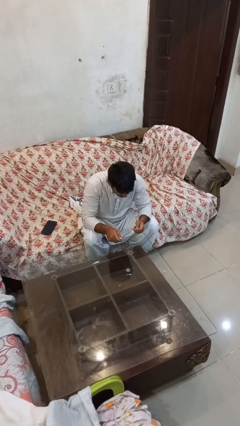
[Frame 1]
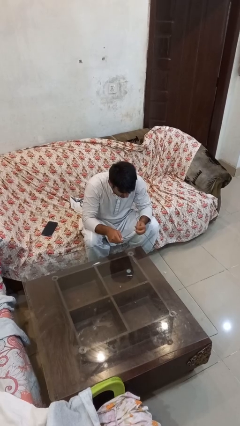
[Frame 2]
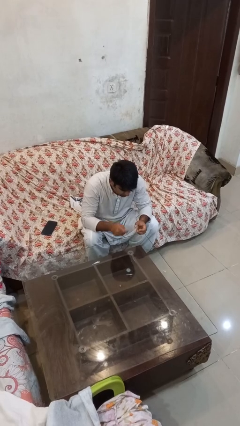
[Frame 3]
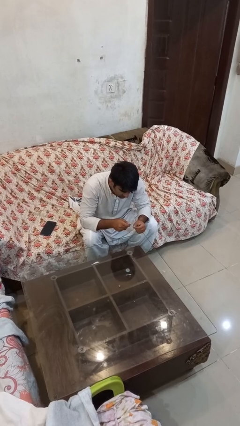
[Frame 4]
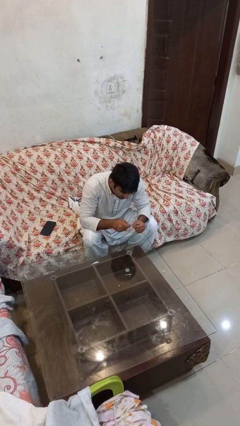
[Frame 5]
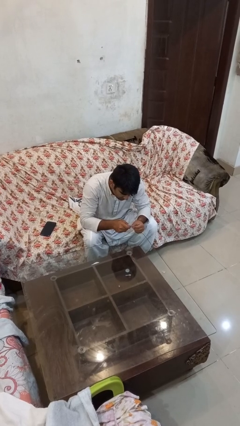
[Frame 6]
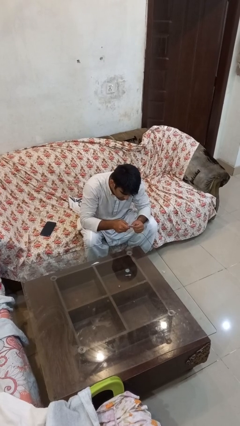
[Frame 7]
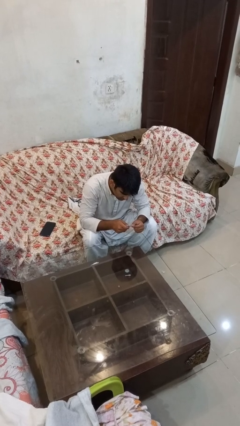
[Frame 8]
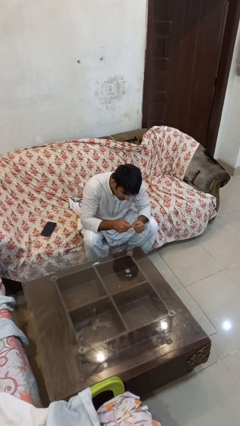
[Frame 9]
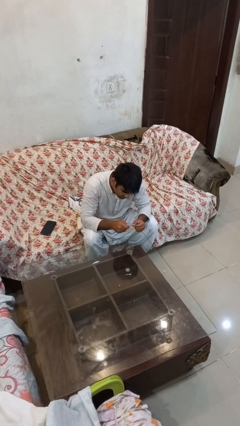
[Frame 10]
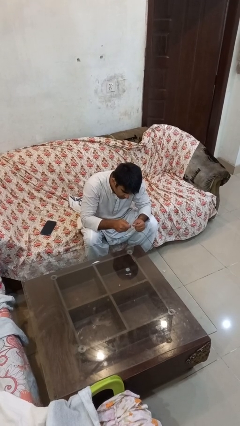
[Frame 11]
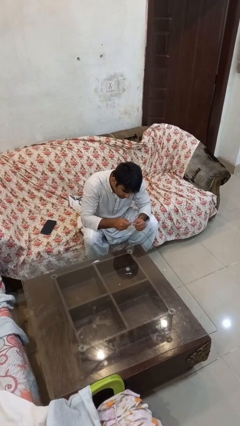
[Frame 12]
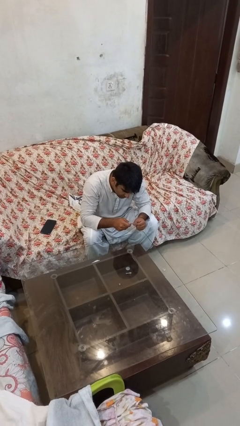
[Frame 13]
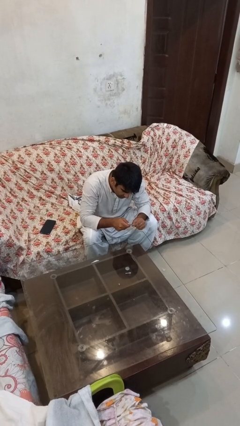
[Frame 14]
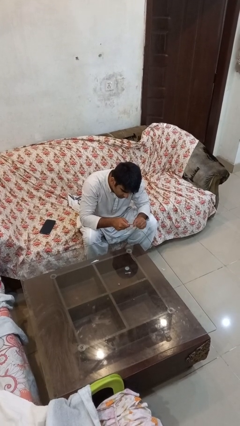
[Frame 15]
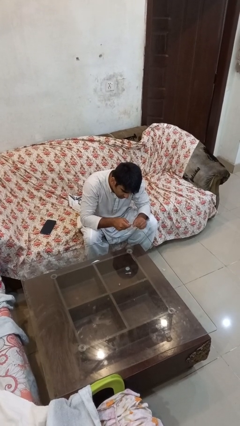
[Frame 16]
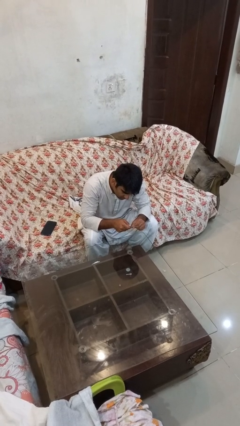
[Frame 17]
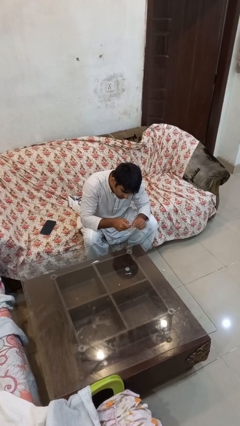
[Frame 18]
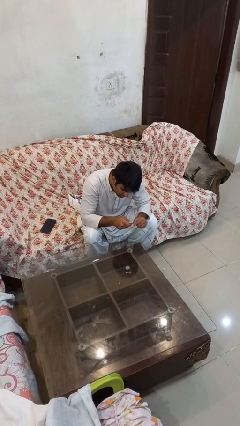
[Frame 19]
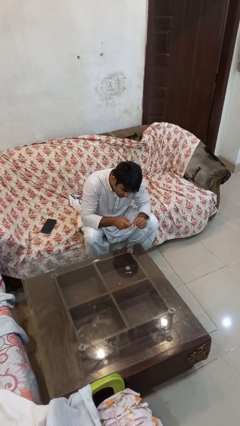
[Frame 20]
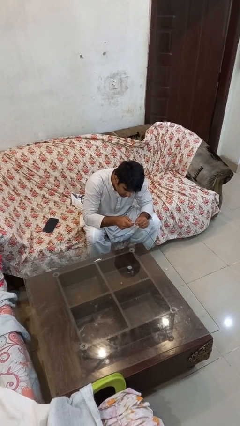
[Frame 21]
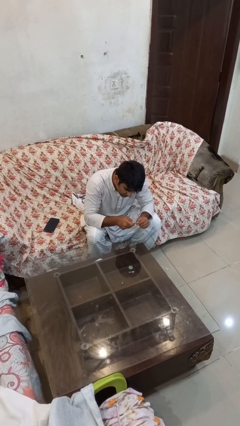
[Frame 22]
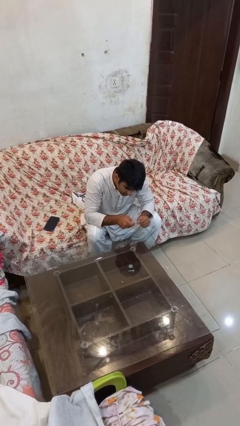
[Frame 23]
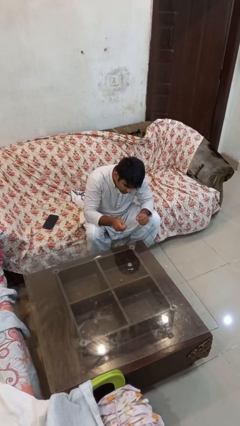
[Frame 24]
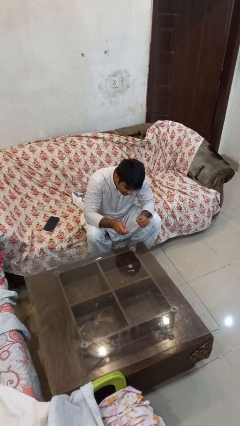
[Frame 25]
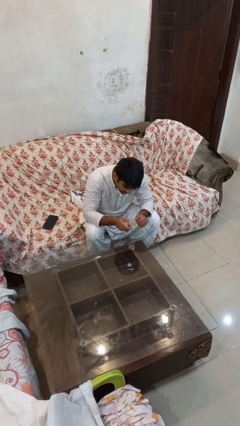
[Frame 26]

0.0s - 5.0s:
person files fingernails

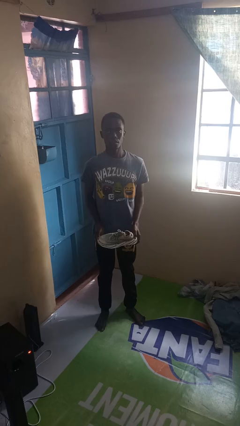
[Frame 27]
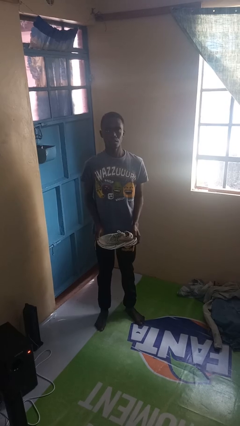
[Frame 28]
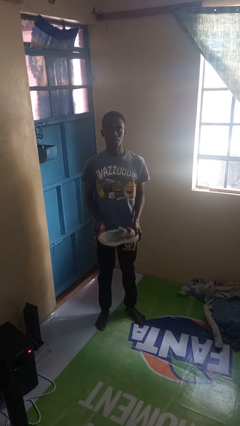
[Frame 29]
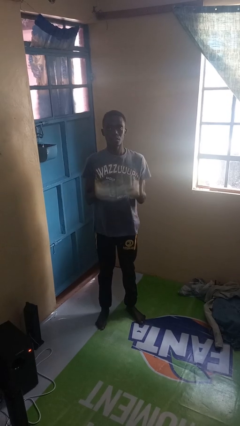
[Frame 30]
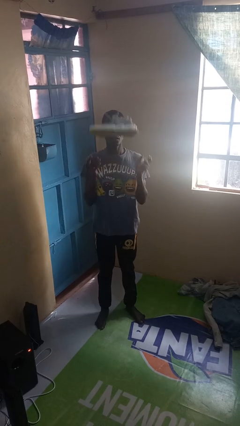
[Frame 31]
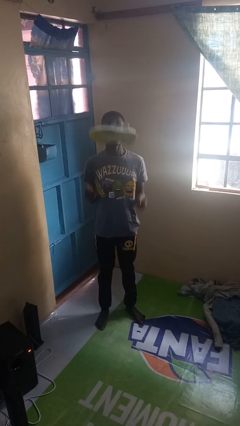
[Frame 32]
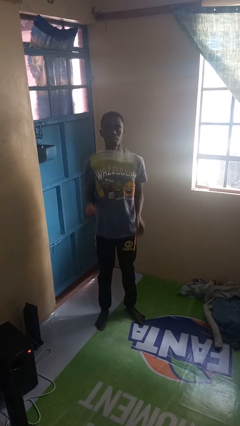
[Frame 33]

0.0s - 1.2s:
person throws object into air

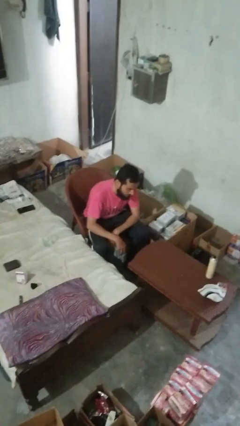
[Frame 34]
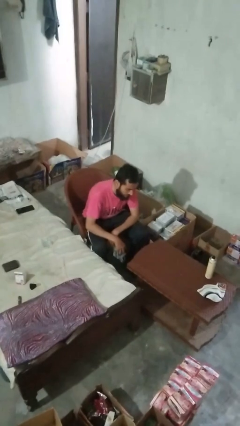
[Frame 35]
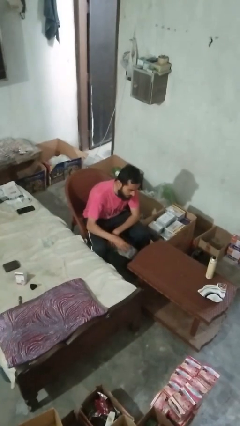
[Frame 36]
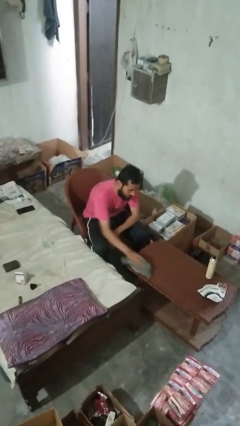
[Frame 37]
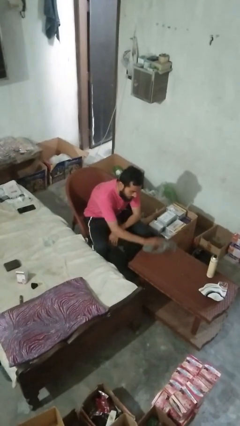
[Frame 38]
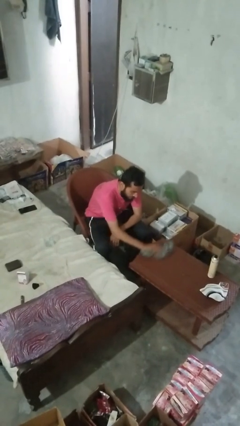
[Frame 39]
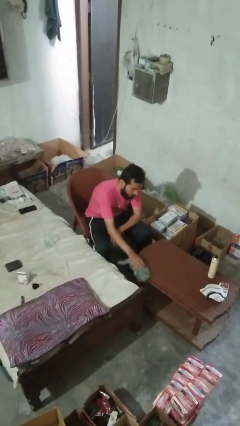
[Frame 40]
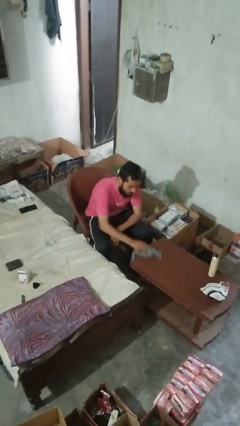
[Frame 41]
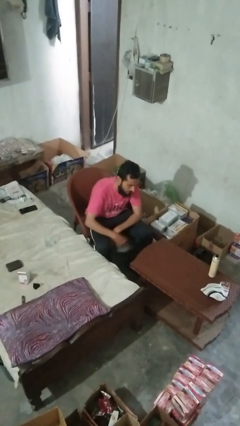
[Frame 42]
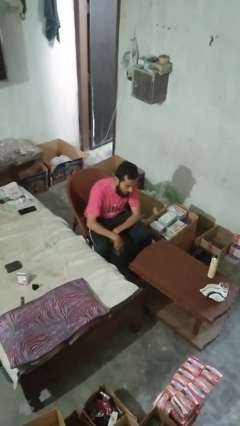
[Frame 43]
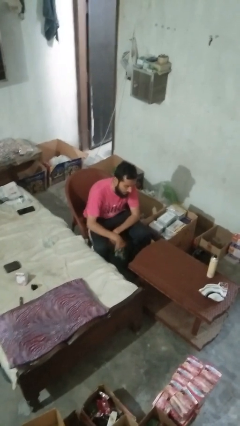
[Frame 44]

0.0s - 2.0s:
person cleans table with rag

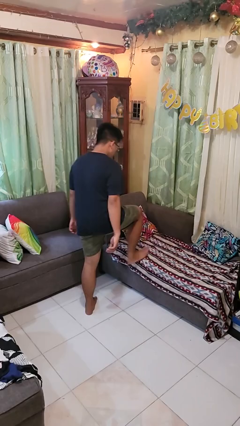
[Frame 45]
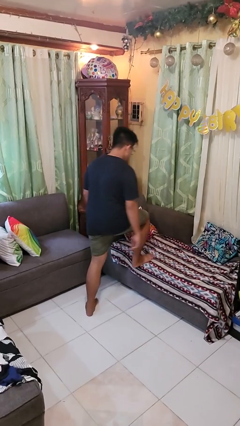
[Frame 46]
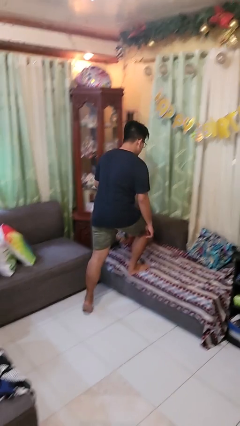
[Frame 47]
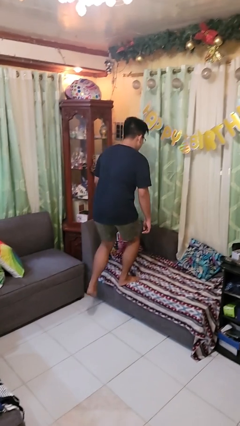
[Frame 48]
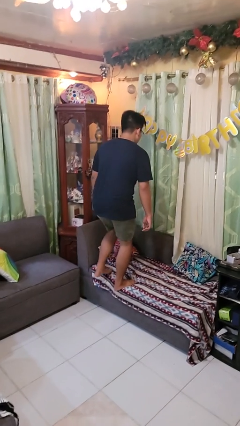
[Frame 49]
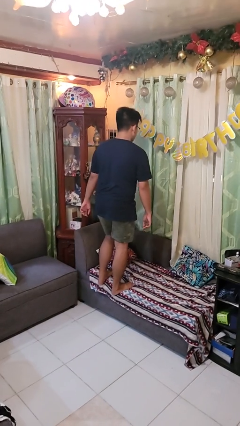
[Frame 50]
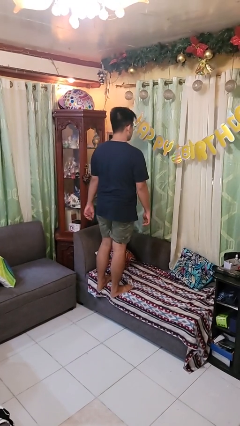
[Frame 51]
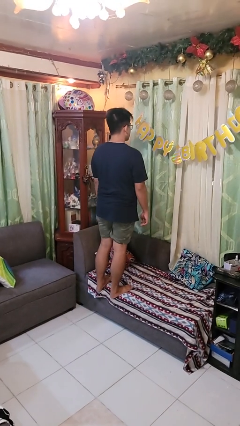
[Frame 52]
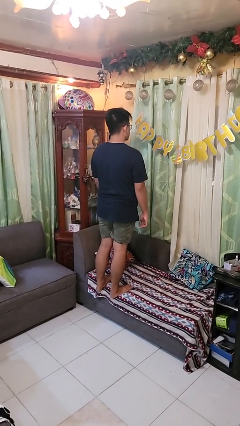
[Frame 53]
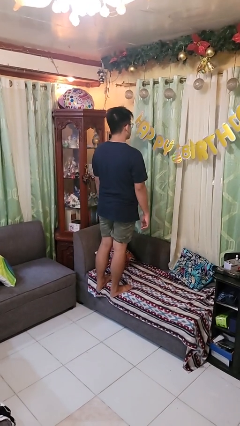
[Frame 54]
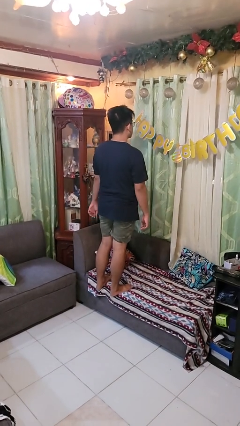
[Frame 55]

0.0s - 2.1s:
person climbs on couch

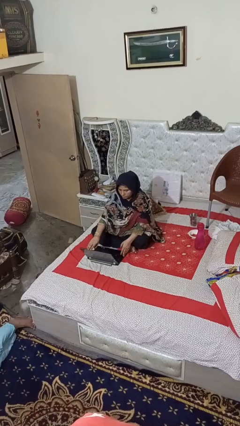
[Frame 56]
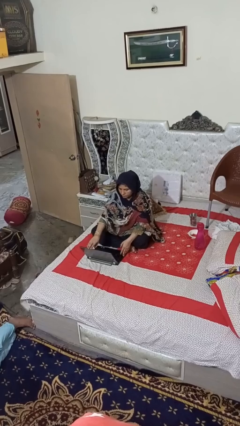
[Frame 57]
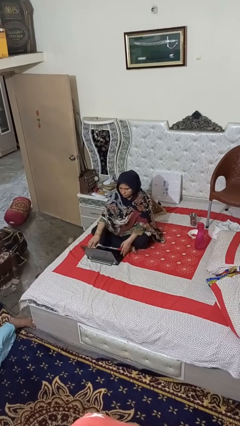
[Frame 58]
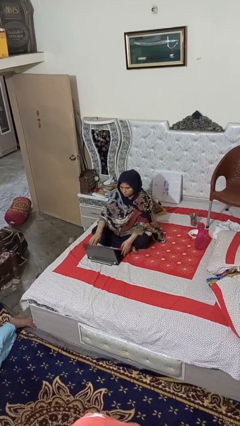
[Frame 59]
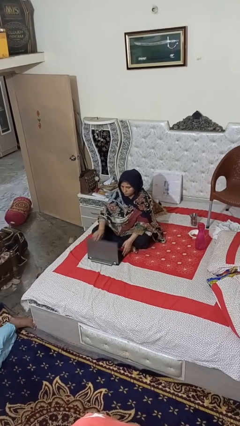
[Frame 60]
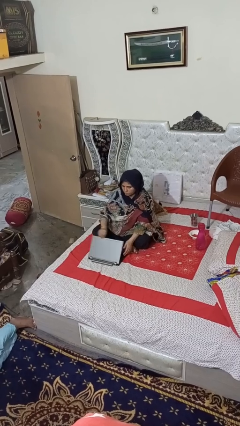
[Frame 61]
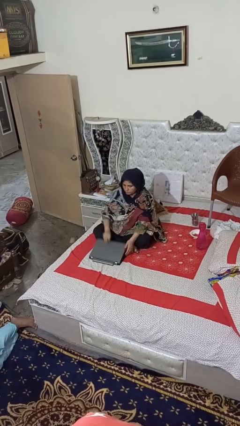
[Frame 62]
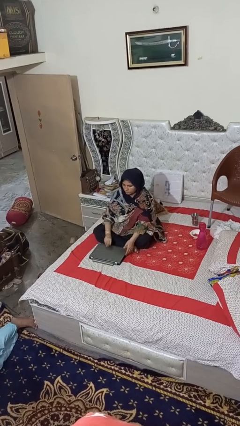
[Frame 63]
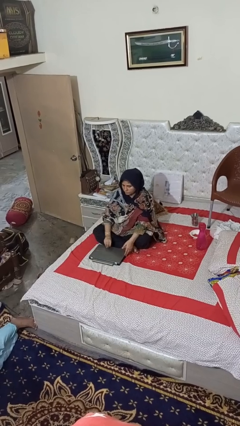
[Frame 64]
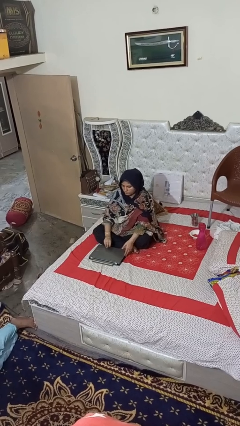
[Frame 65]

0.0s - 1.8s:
person closes laptop

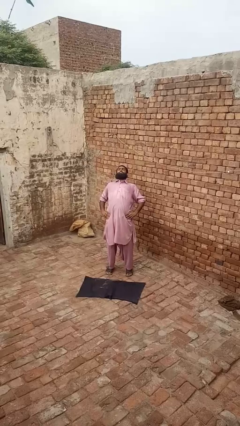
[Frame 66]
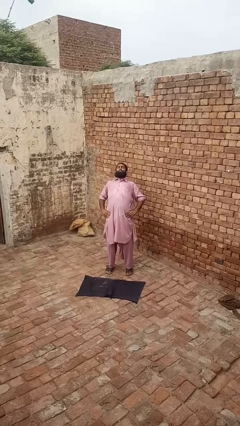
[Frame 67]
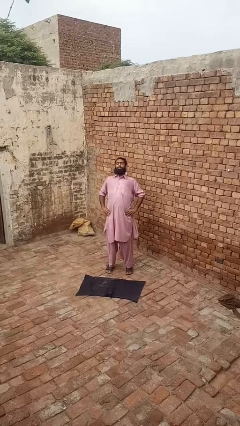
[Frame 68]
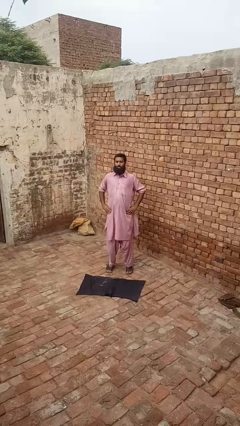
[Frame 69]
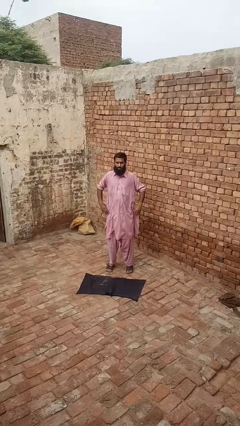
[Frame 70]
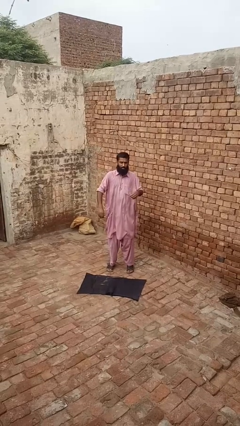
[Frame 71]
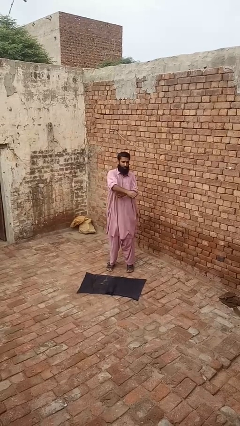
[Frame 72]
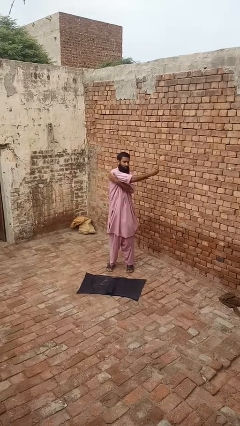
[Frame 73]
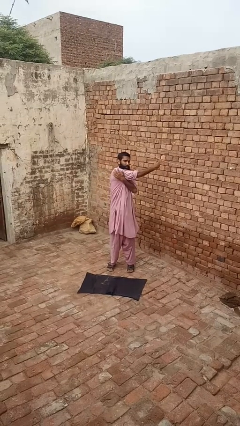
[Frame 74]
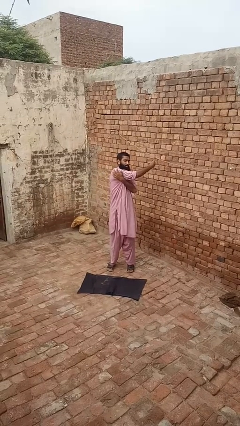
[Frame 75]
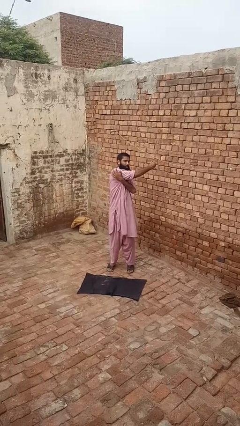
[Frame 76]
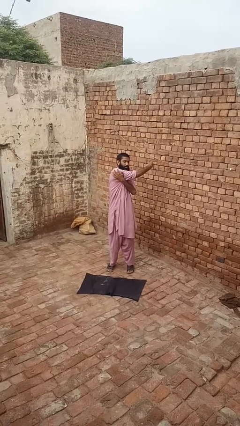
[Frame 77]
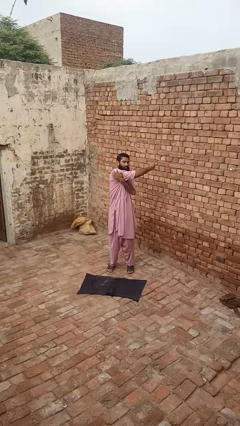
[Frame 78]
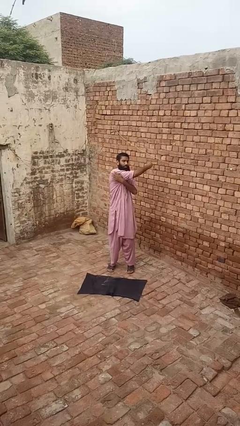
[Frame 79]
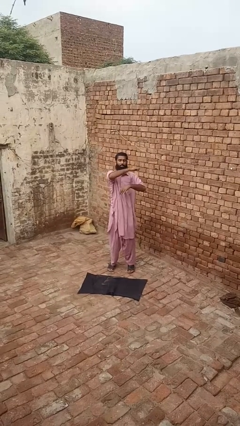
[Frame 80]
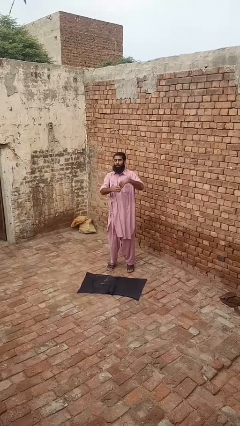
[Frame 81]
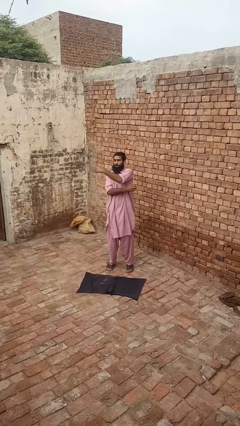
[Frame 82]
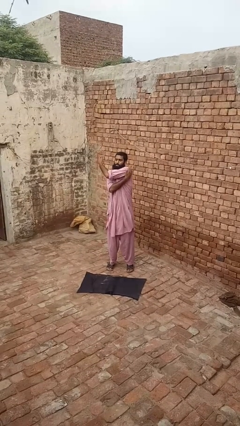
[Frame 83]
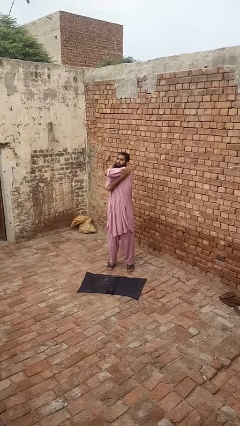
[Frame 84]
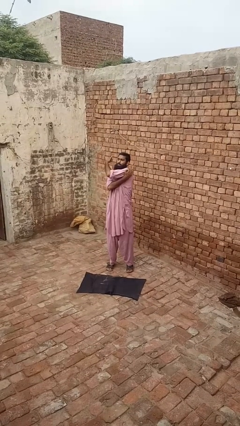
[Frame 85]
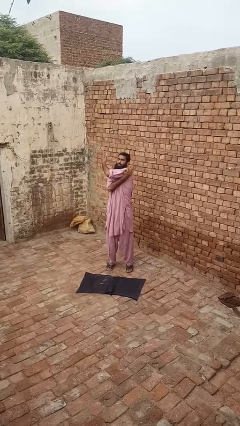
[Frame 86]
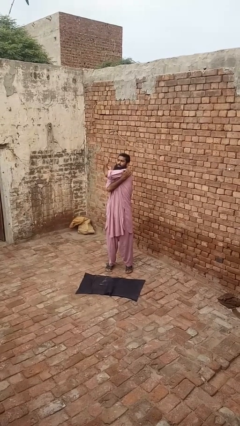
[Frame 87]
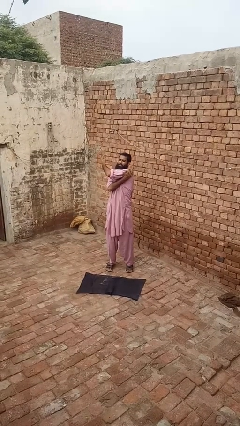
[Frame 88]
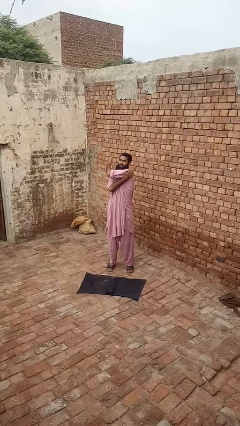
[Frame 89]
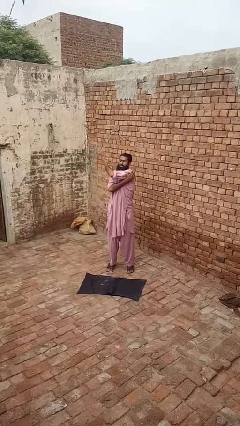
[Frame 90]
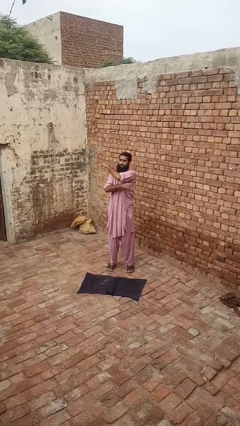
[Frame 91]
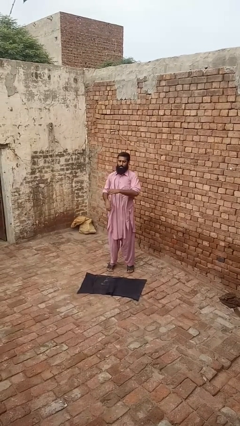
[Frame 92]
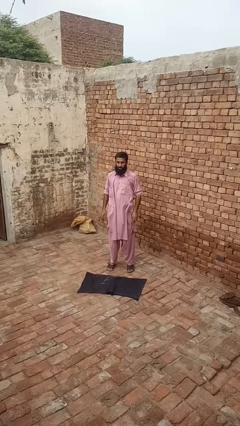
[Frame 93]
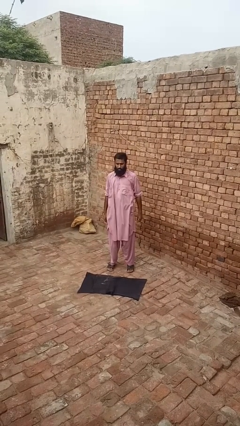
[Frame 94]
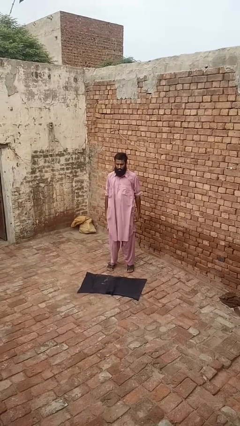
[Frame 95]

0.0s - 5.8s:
person stretches arms to side
